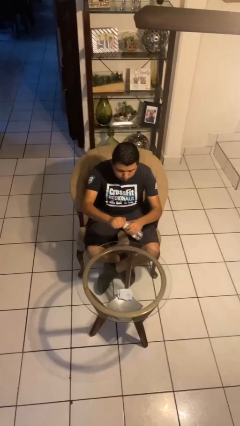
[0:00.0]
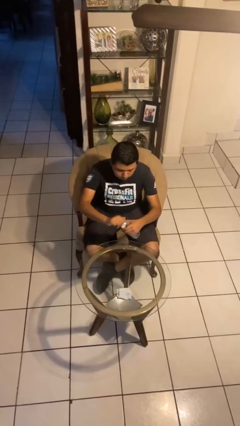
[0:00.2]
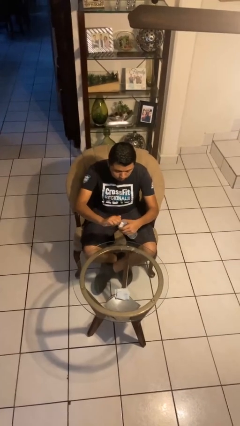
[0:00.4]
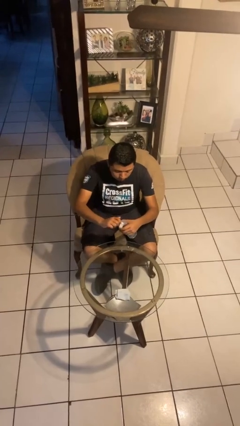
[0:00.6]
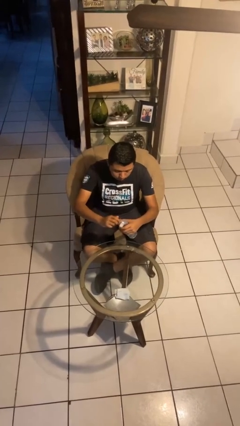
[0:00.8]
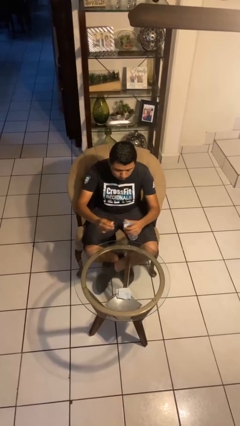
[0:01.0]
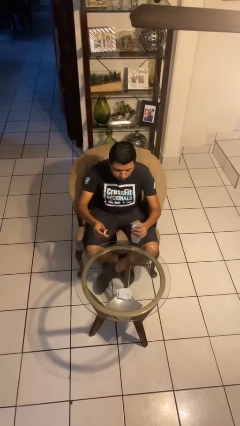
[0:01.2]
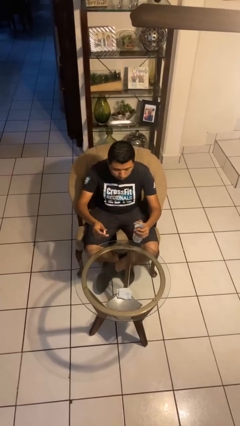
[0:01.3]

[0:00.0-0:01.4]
person unscrews lid from bottle

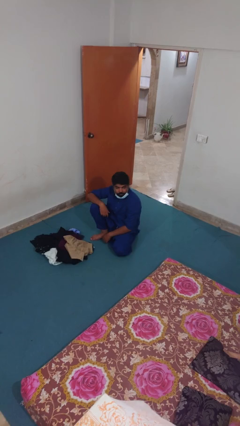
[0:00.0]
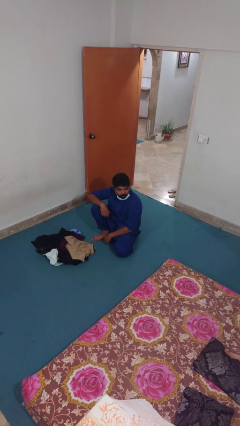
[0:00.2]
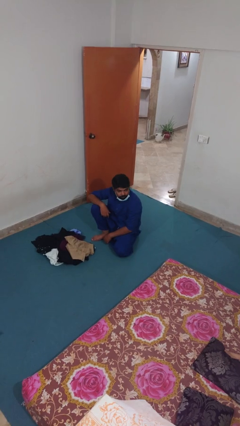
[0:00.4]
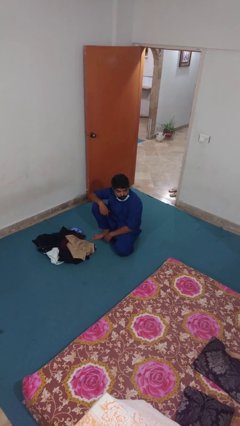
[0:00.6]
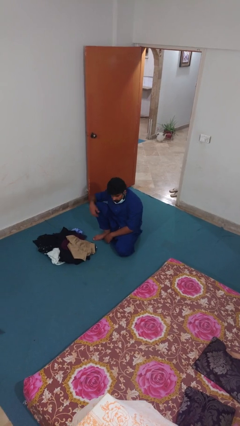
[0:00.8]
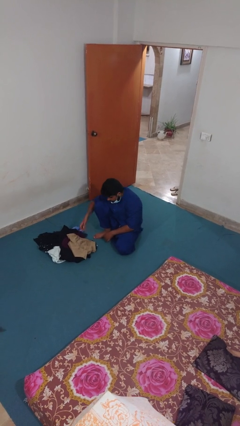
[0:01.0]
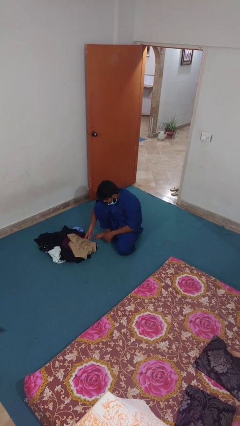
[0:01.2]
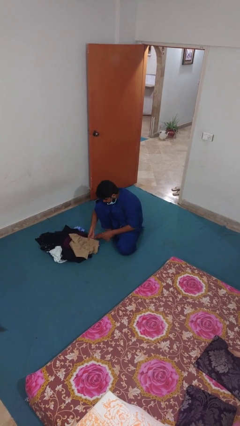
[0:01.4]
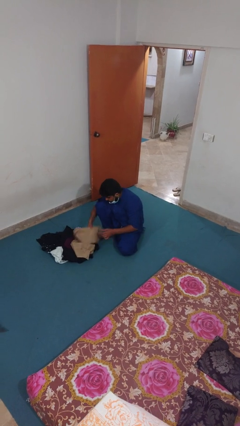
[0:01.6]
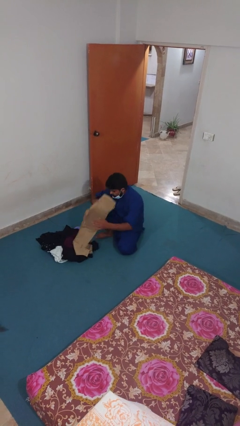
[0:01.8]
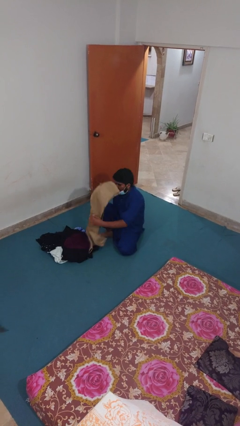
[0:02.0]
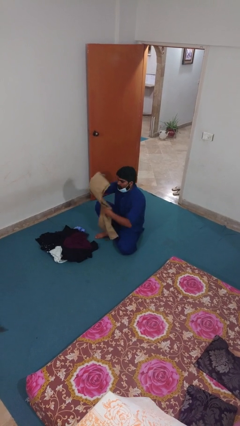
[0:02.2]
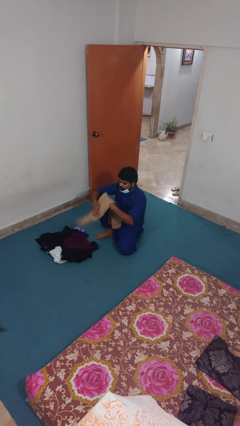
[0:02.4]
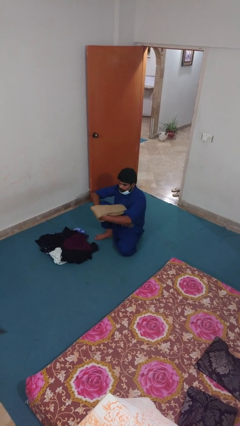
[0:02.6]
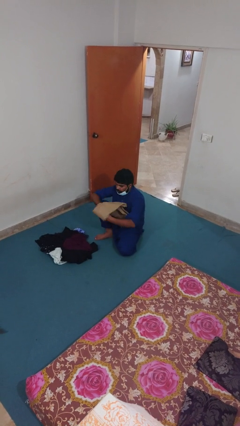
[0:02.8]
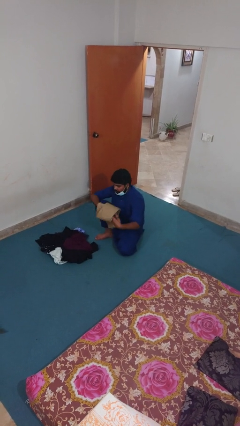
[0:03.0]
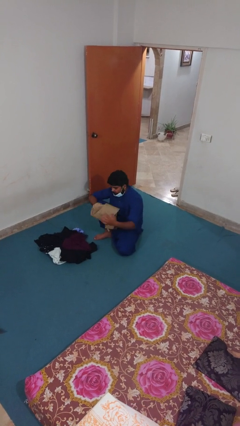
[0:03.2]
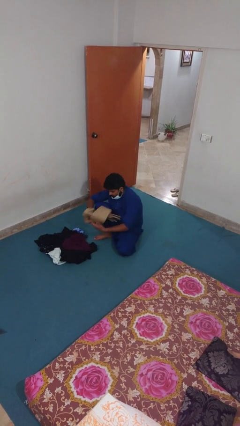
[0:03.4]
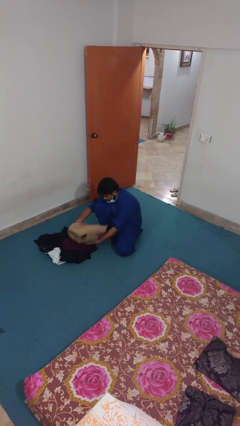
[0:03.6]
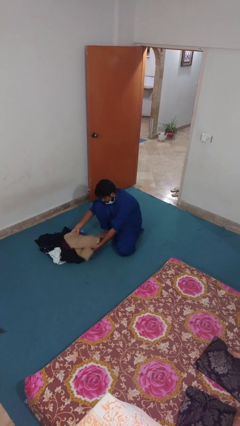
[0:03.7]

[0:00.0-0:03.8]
person folds pants

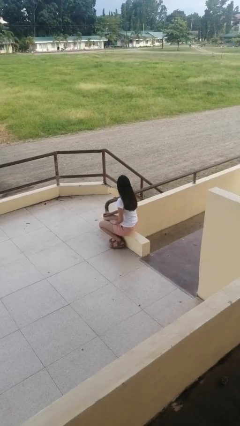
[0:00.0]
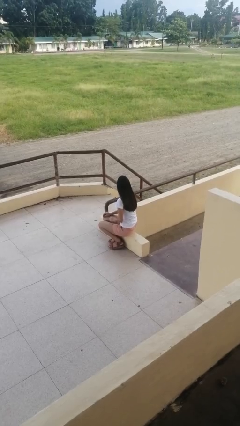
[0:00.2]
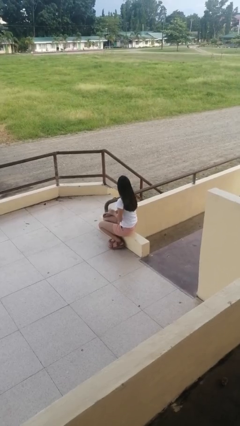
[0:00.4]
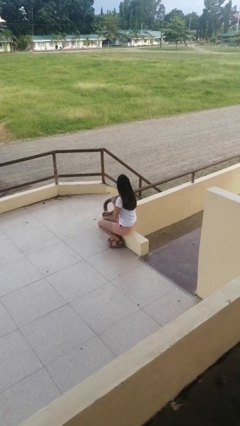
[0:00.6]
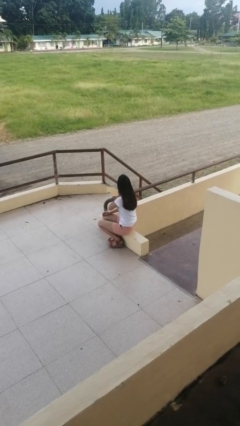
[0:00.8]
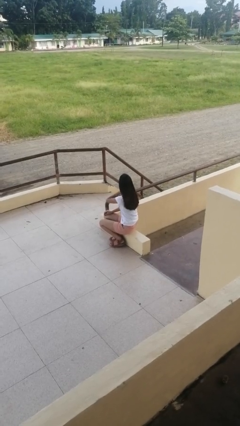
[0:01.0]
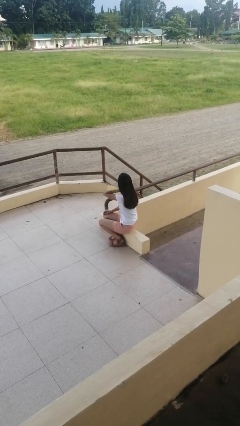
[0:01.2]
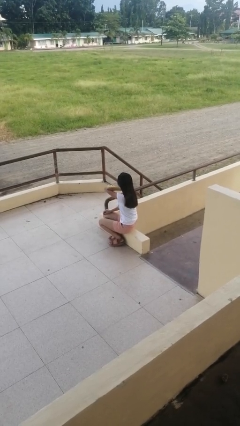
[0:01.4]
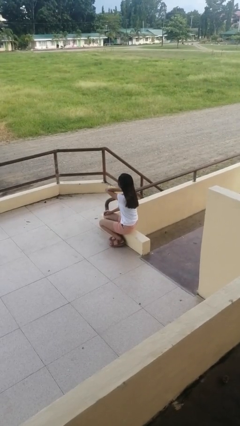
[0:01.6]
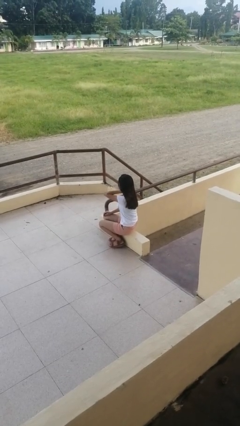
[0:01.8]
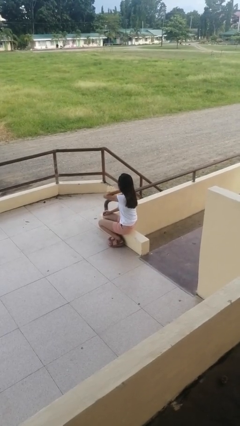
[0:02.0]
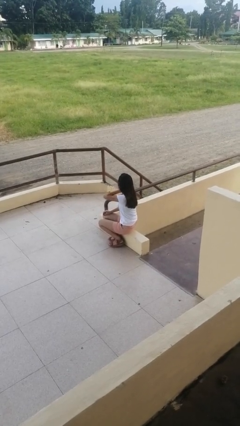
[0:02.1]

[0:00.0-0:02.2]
person rubs neck

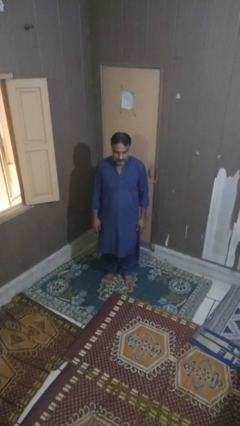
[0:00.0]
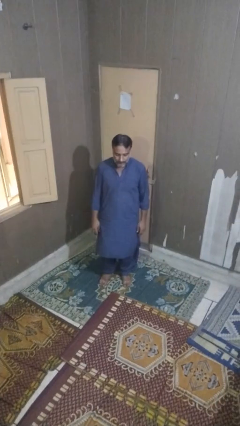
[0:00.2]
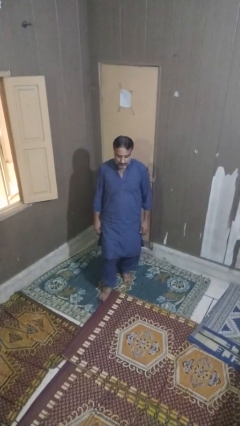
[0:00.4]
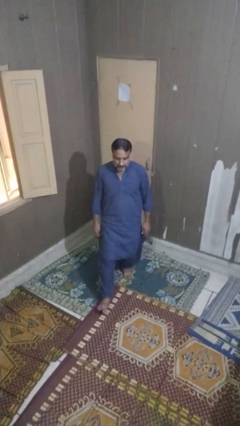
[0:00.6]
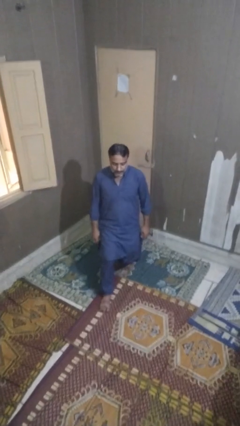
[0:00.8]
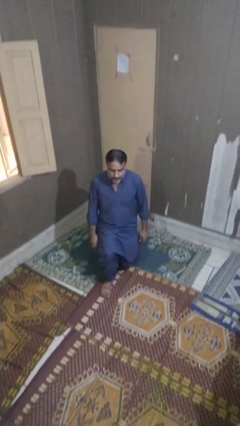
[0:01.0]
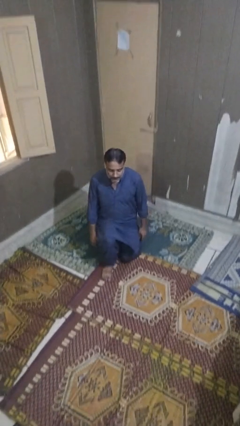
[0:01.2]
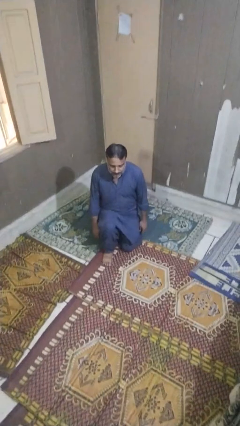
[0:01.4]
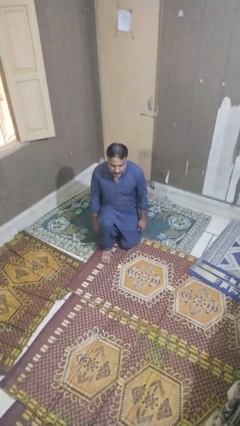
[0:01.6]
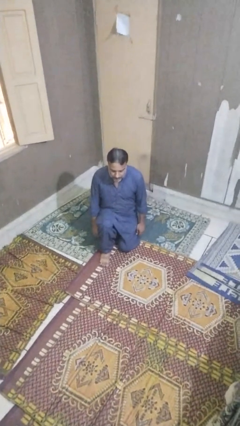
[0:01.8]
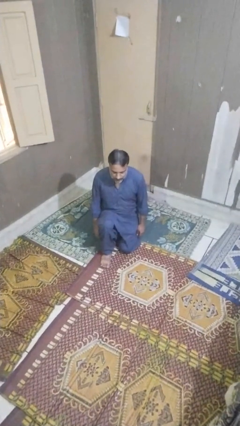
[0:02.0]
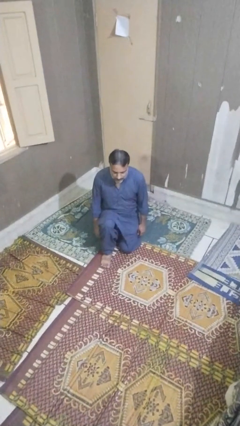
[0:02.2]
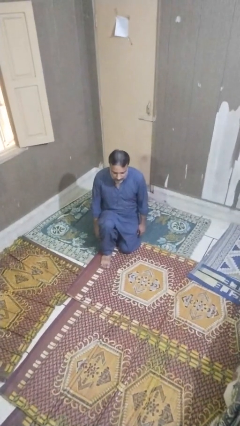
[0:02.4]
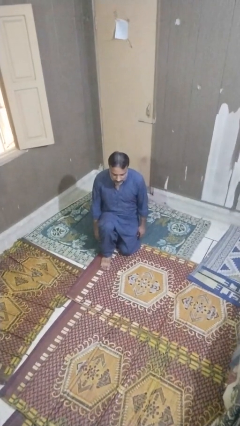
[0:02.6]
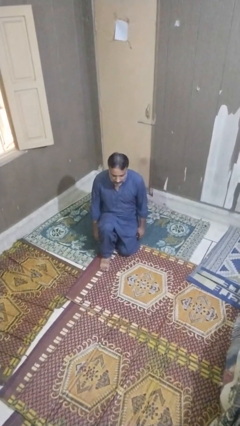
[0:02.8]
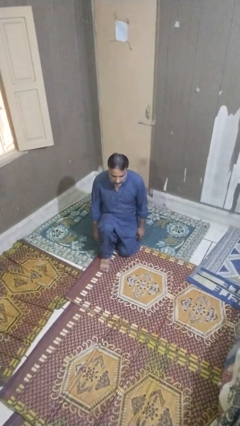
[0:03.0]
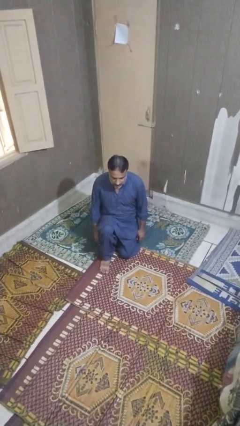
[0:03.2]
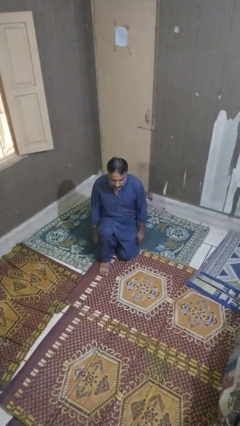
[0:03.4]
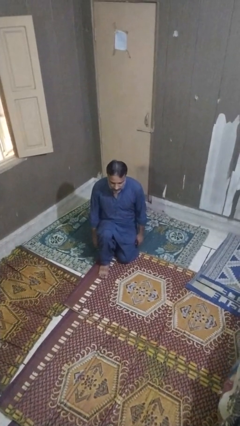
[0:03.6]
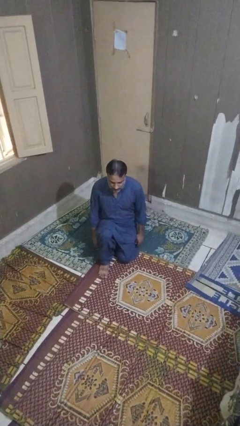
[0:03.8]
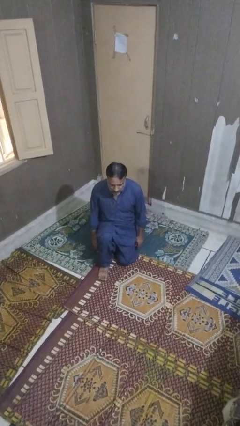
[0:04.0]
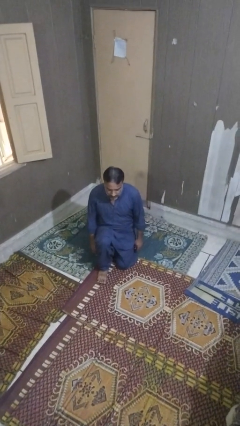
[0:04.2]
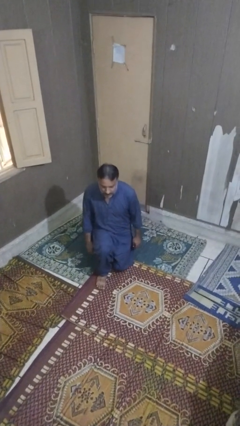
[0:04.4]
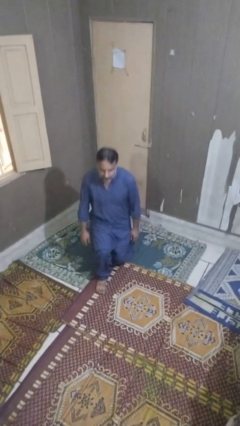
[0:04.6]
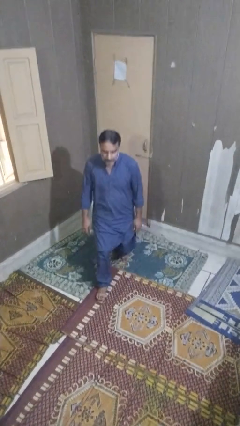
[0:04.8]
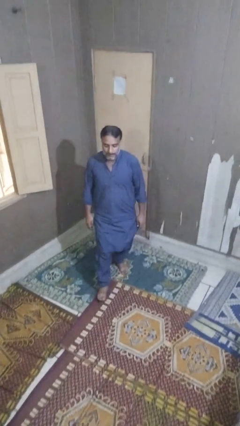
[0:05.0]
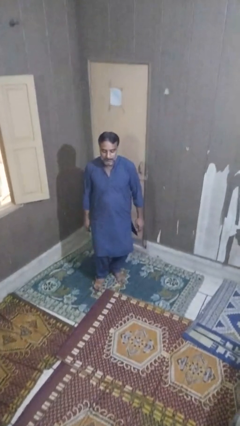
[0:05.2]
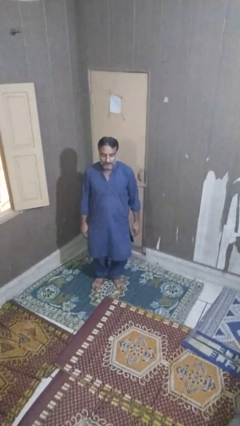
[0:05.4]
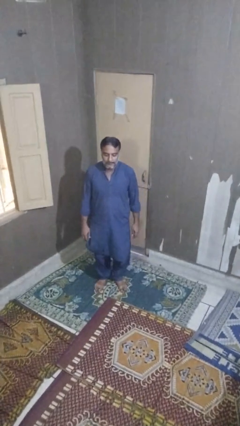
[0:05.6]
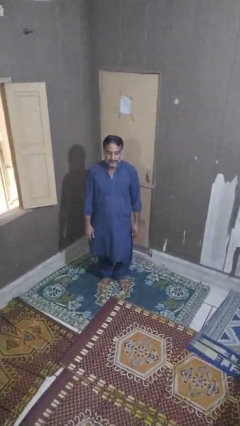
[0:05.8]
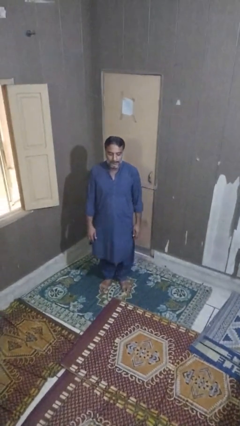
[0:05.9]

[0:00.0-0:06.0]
person exercises with lunges

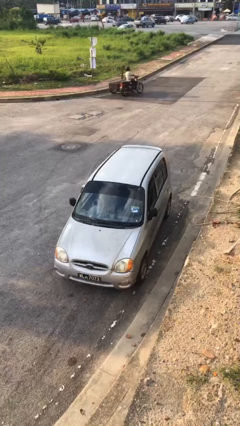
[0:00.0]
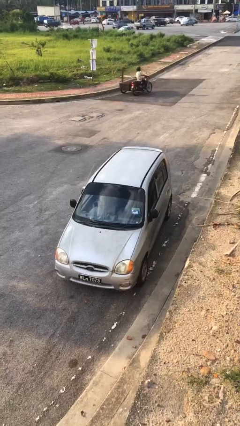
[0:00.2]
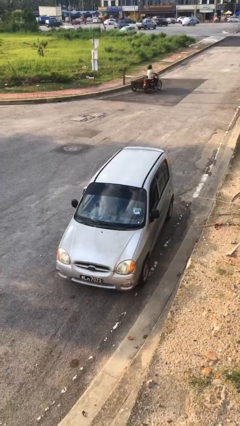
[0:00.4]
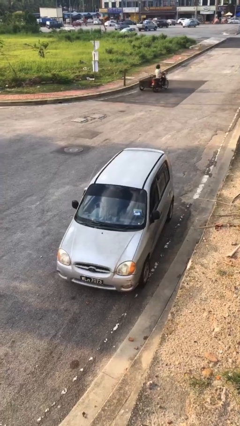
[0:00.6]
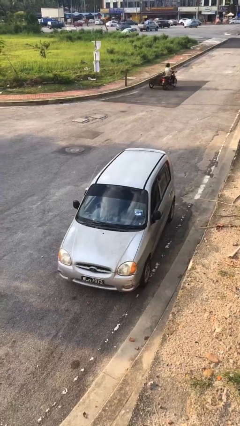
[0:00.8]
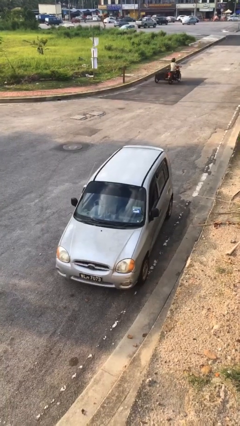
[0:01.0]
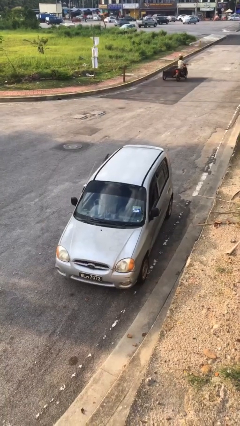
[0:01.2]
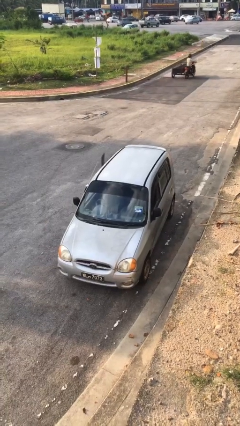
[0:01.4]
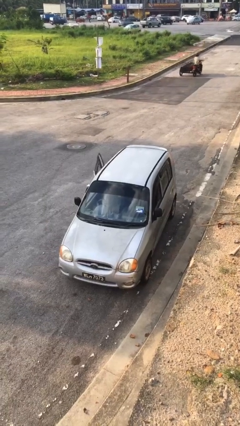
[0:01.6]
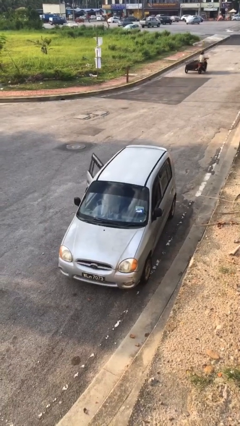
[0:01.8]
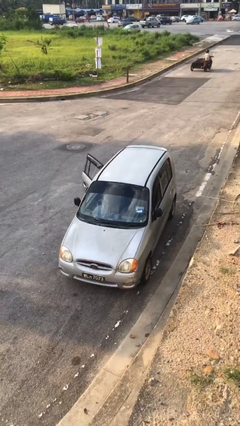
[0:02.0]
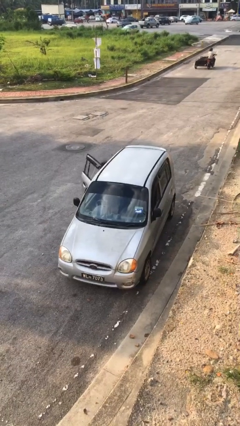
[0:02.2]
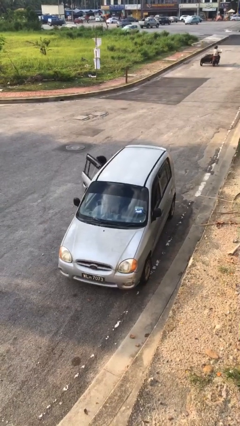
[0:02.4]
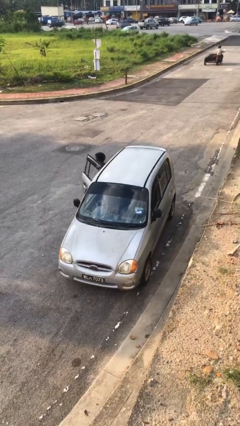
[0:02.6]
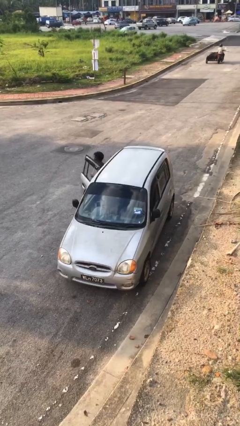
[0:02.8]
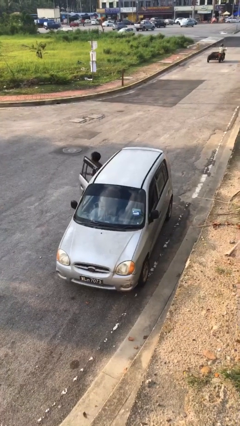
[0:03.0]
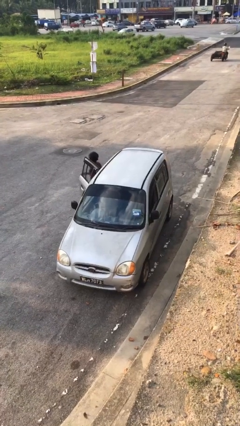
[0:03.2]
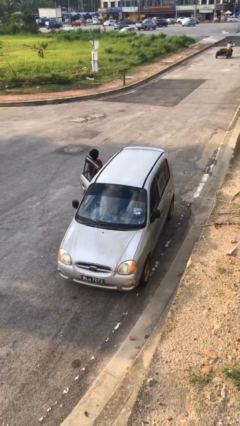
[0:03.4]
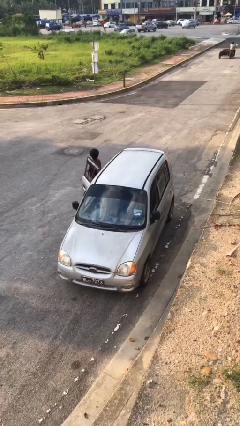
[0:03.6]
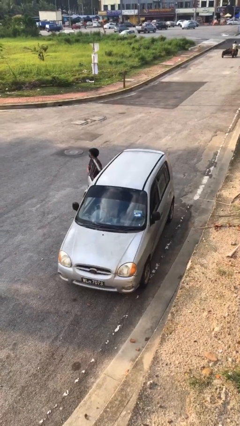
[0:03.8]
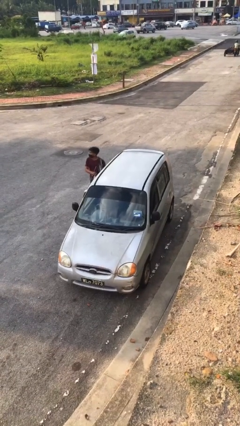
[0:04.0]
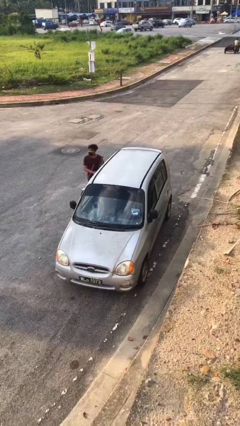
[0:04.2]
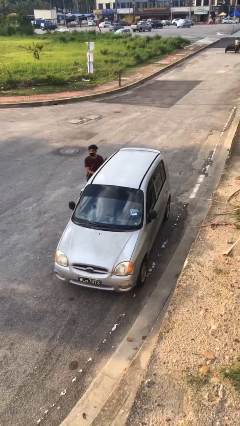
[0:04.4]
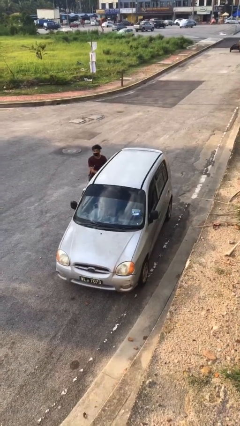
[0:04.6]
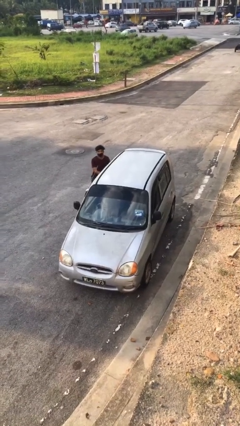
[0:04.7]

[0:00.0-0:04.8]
car drops off person
